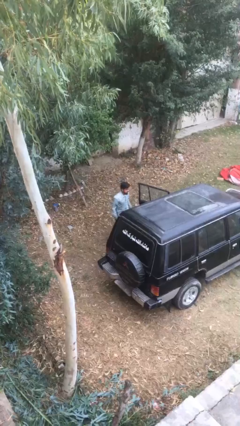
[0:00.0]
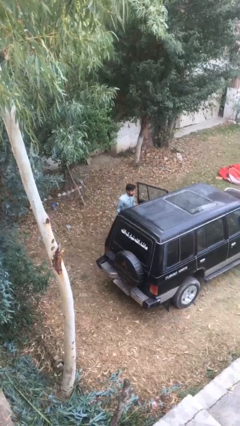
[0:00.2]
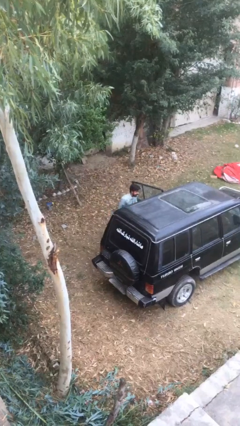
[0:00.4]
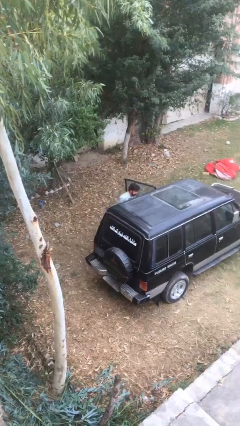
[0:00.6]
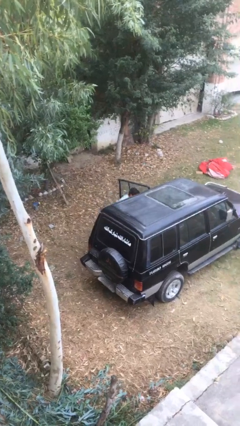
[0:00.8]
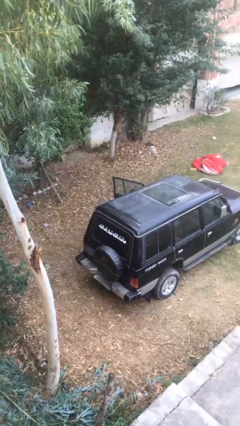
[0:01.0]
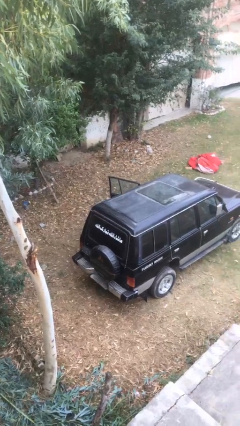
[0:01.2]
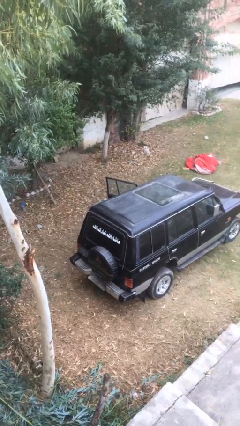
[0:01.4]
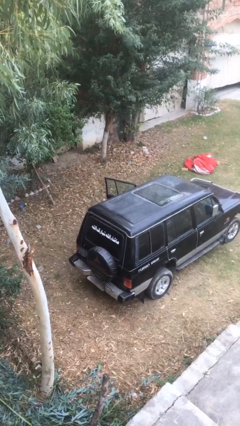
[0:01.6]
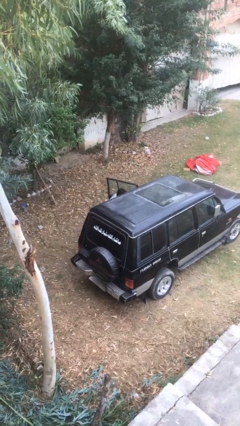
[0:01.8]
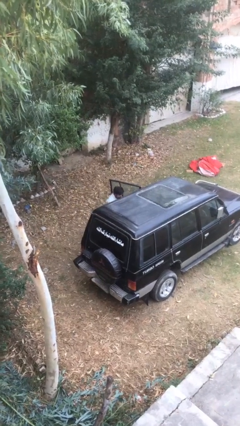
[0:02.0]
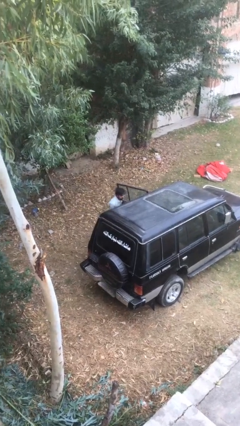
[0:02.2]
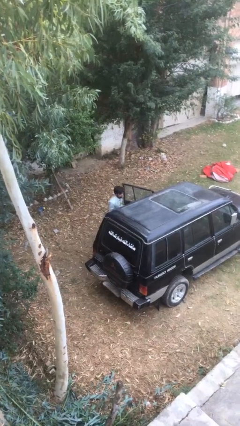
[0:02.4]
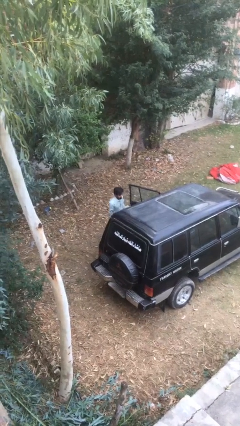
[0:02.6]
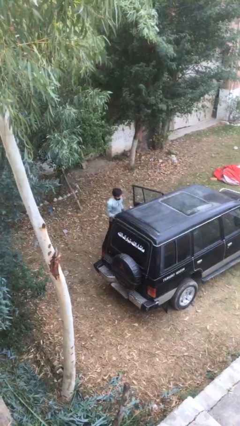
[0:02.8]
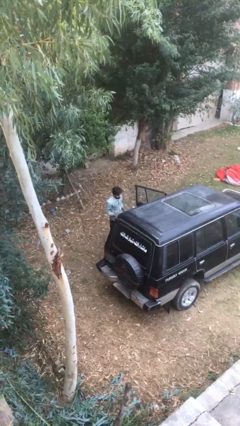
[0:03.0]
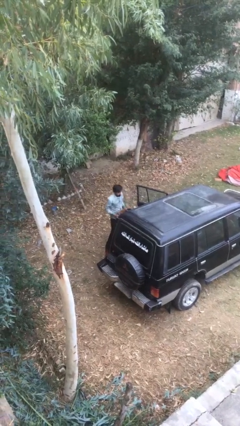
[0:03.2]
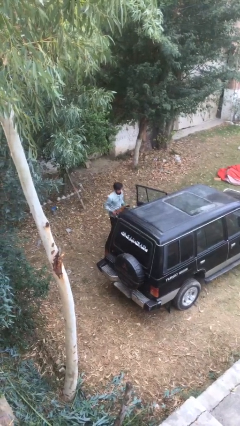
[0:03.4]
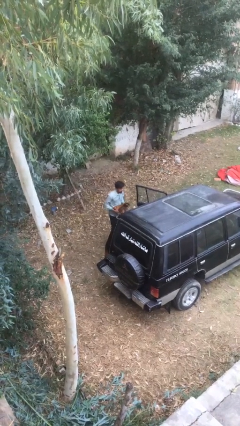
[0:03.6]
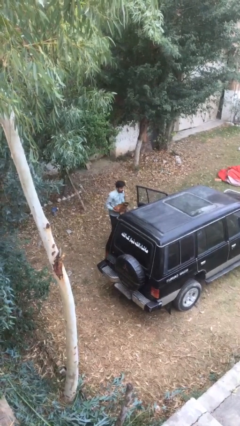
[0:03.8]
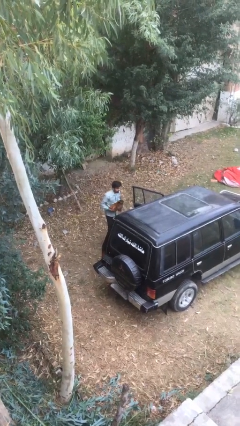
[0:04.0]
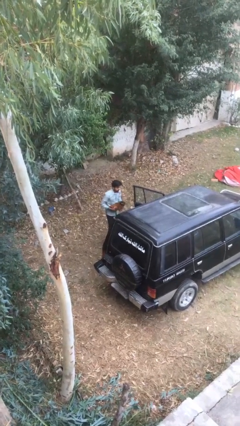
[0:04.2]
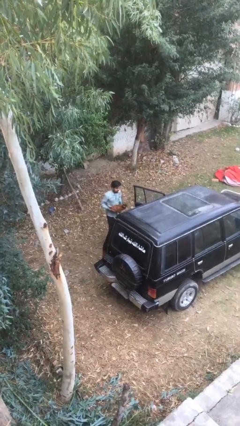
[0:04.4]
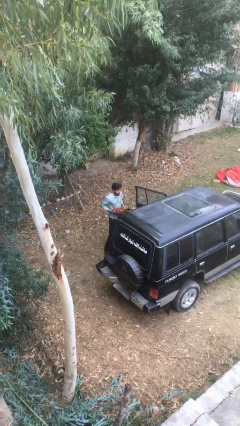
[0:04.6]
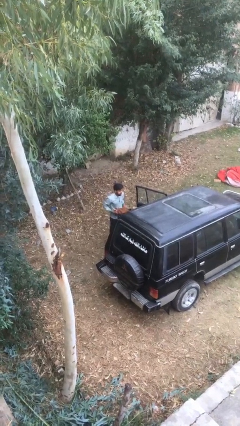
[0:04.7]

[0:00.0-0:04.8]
person unloads car

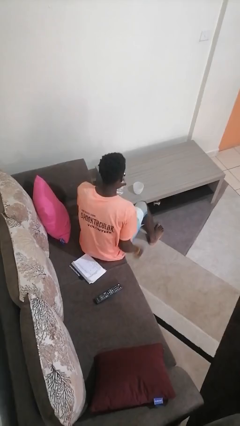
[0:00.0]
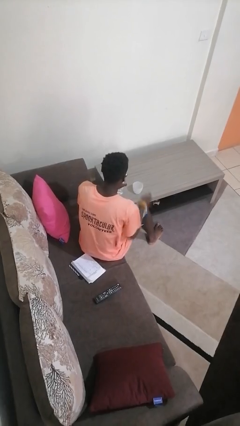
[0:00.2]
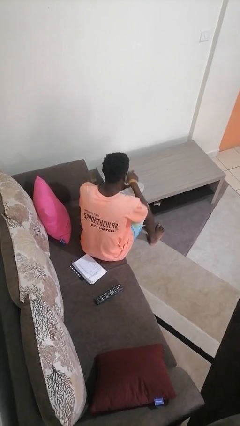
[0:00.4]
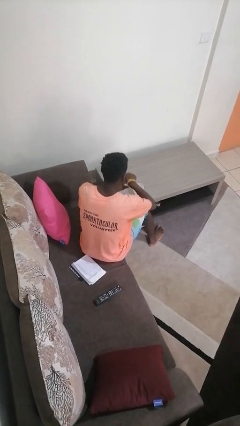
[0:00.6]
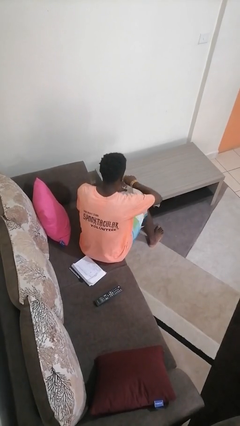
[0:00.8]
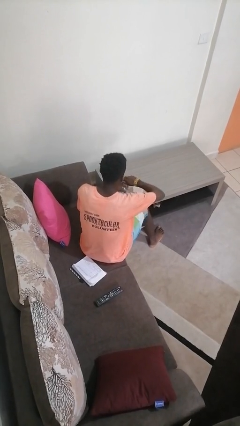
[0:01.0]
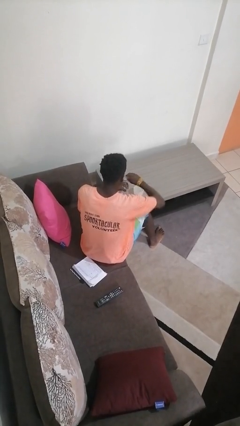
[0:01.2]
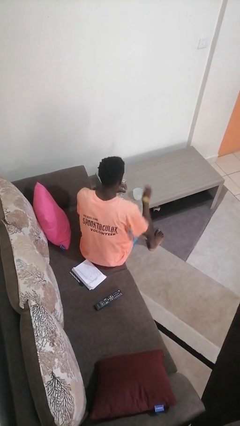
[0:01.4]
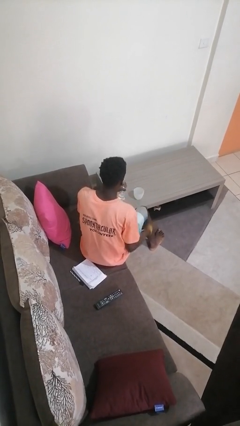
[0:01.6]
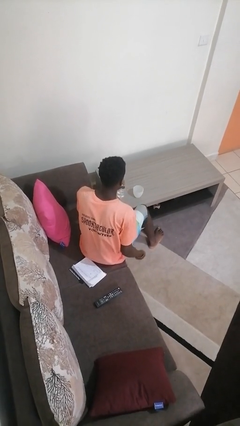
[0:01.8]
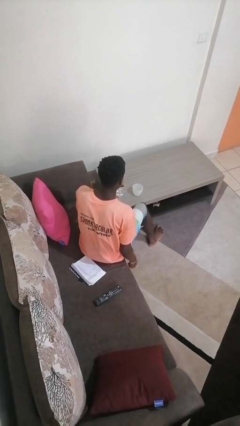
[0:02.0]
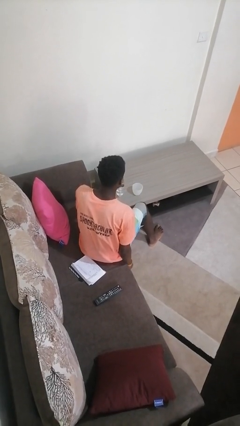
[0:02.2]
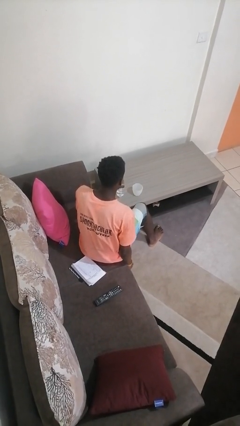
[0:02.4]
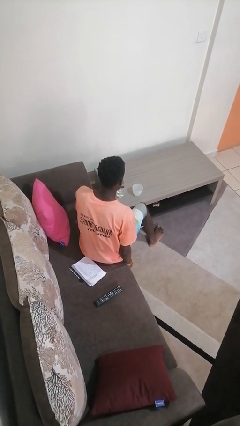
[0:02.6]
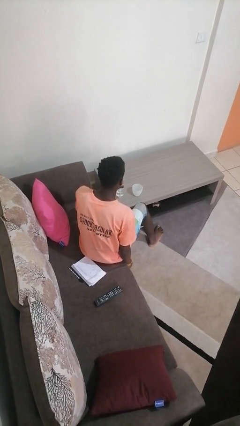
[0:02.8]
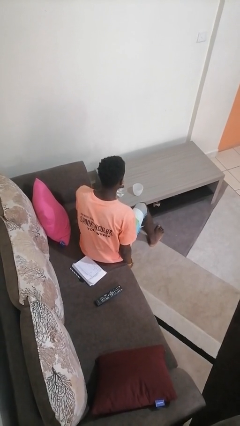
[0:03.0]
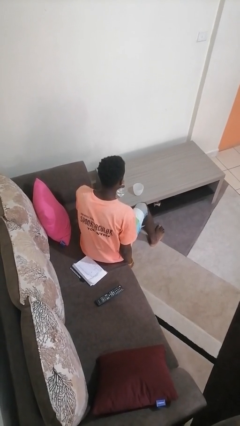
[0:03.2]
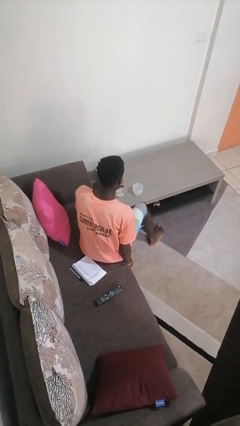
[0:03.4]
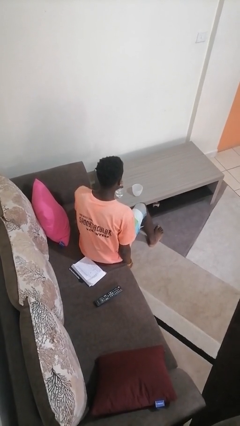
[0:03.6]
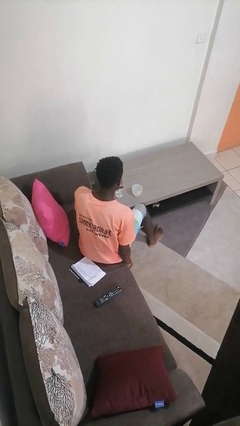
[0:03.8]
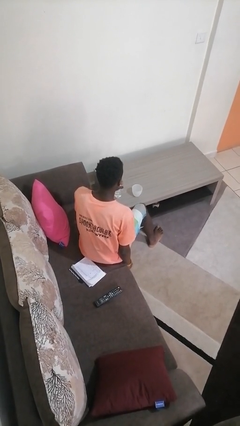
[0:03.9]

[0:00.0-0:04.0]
person unscrews lid from bottle

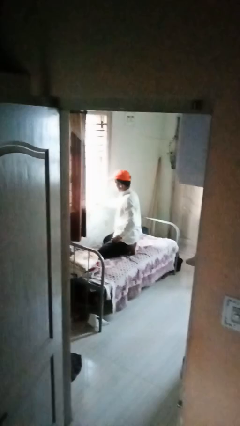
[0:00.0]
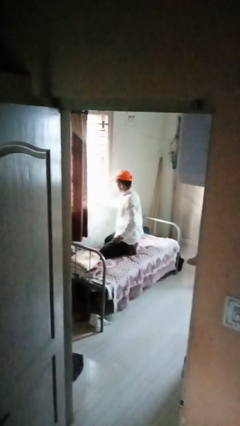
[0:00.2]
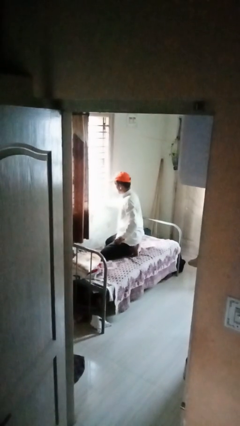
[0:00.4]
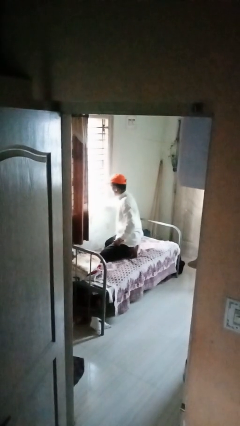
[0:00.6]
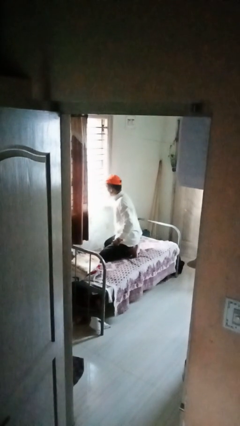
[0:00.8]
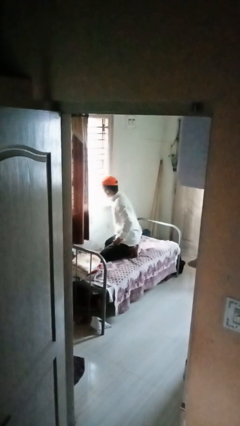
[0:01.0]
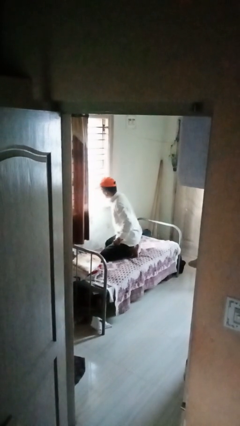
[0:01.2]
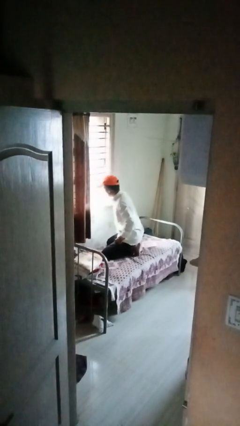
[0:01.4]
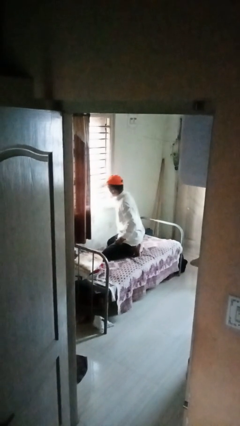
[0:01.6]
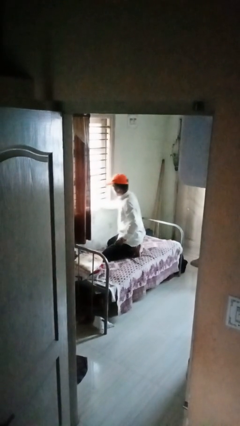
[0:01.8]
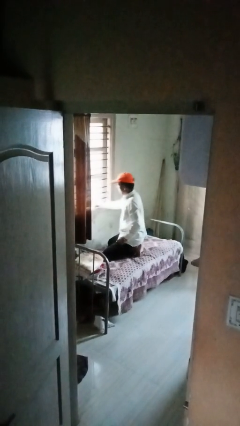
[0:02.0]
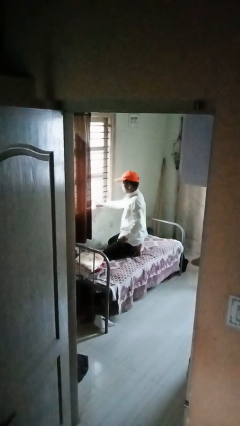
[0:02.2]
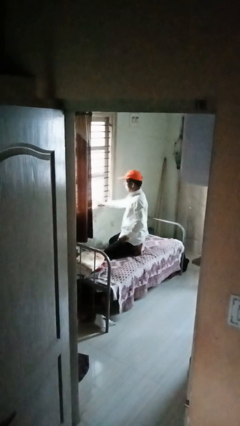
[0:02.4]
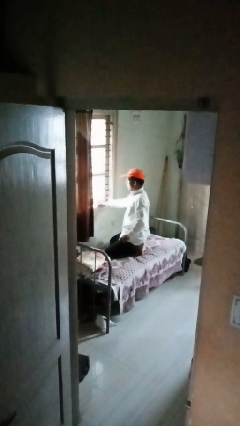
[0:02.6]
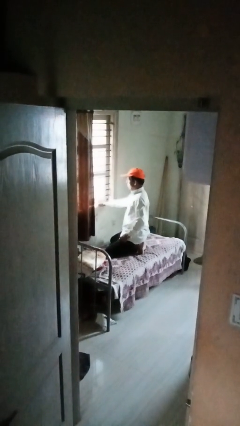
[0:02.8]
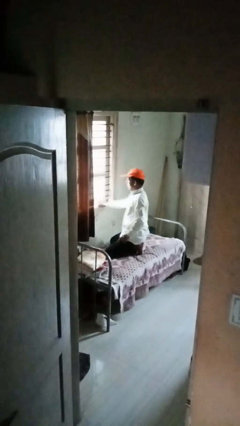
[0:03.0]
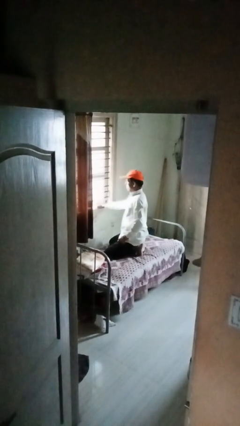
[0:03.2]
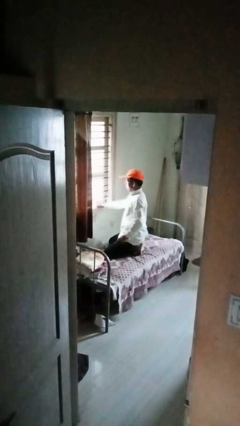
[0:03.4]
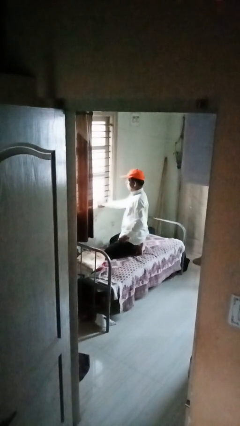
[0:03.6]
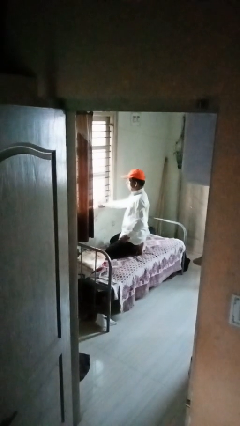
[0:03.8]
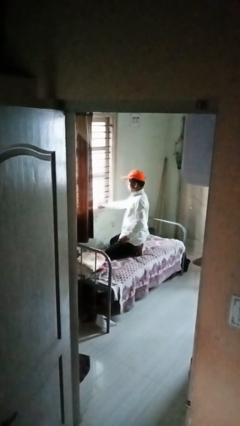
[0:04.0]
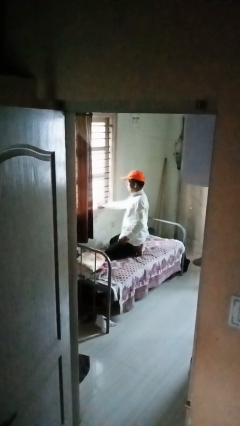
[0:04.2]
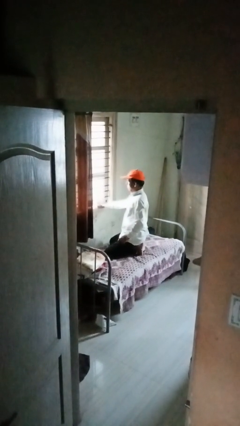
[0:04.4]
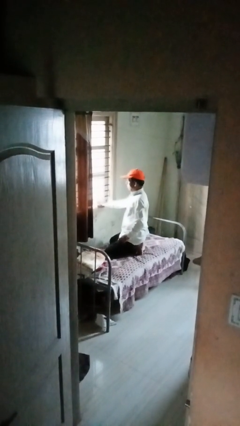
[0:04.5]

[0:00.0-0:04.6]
person closes home window

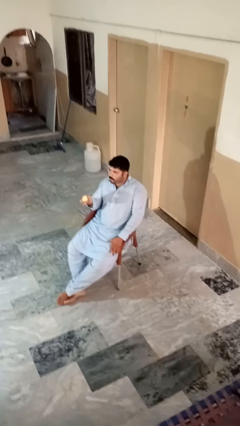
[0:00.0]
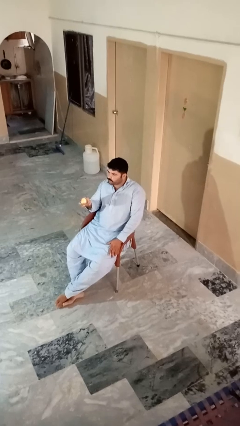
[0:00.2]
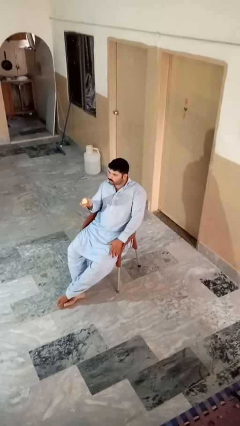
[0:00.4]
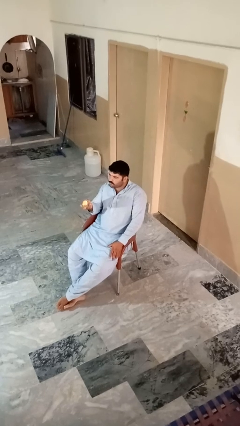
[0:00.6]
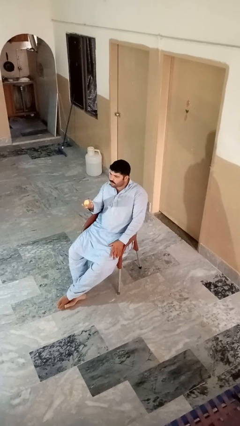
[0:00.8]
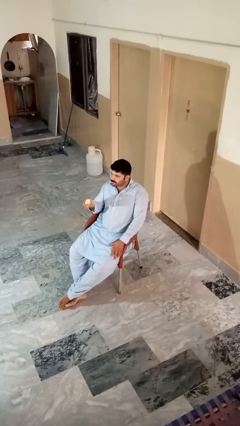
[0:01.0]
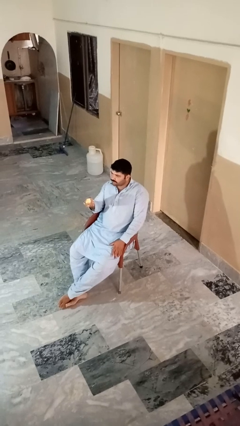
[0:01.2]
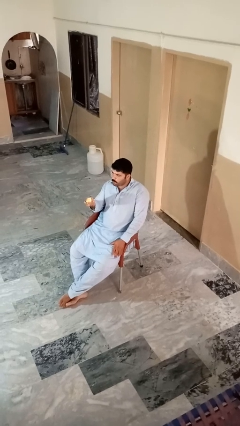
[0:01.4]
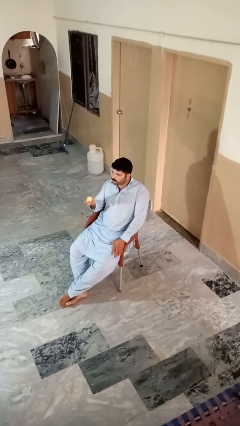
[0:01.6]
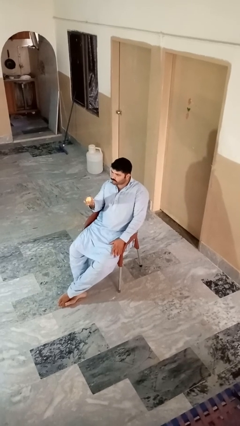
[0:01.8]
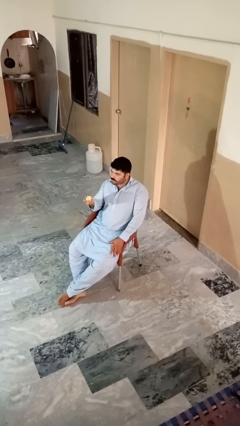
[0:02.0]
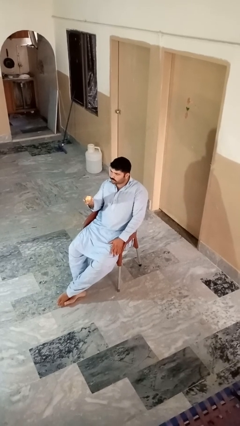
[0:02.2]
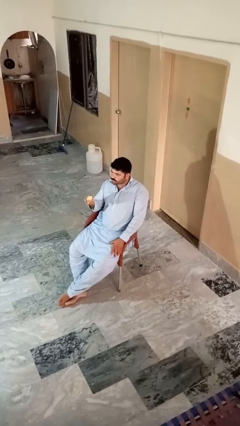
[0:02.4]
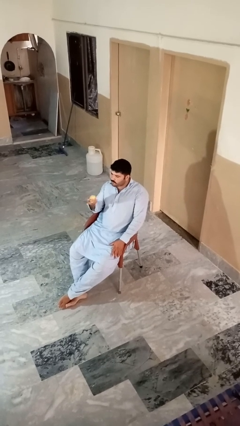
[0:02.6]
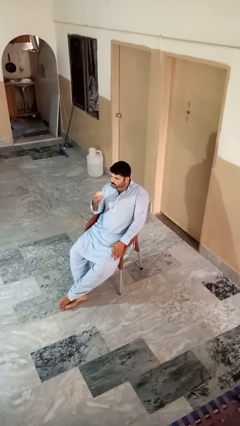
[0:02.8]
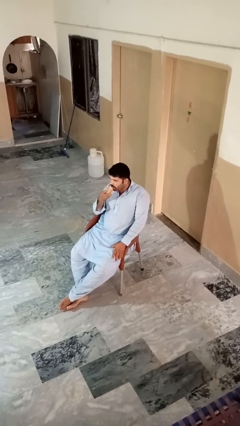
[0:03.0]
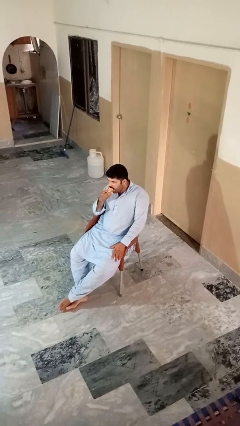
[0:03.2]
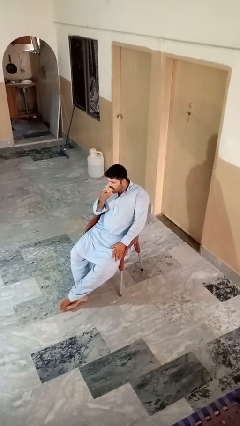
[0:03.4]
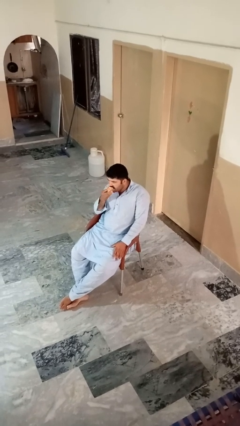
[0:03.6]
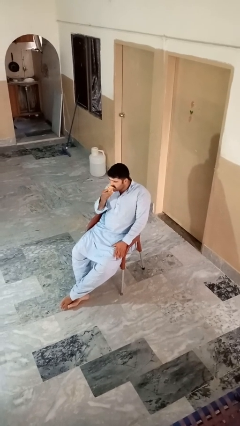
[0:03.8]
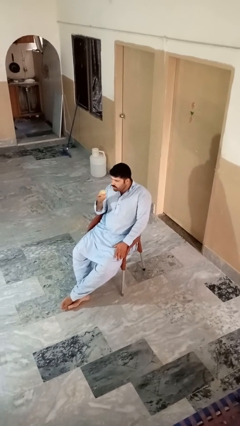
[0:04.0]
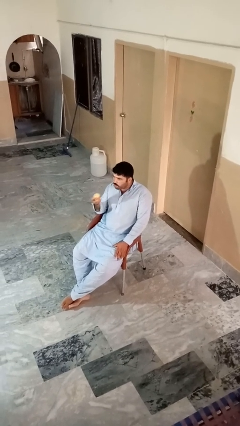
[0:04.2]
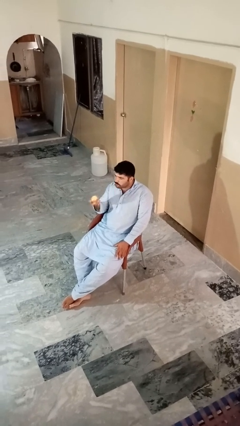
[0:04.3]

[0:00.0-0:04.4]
person eats apple

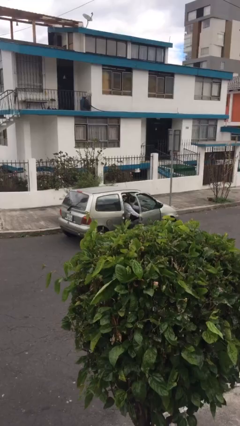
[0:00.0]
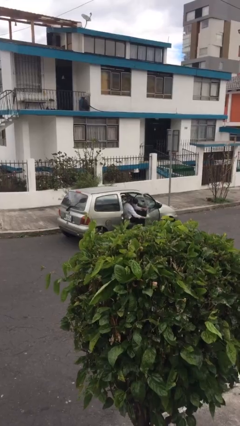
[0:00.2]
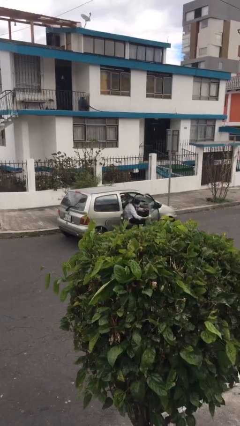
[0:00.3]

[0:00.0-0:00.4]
car drops off person
